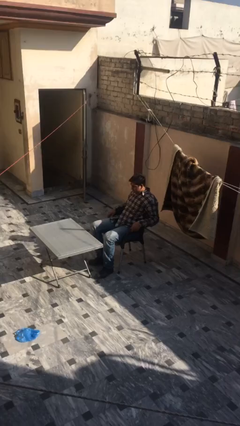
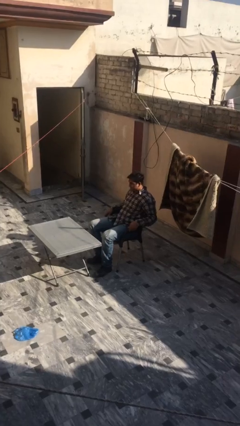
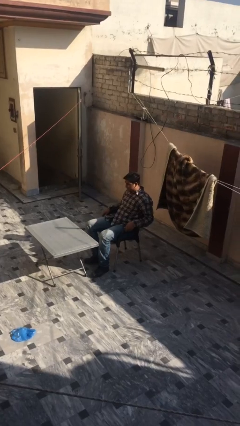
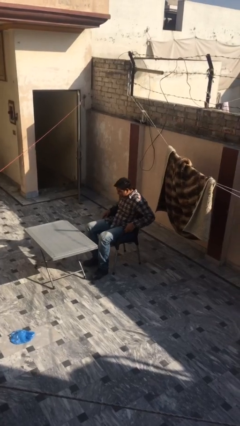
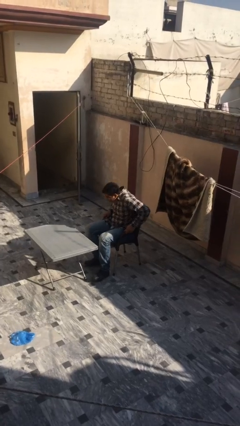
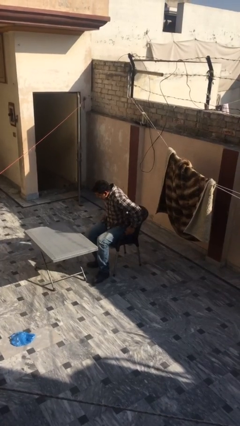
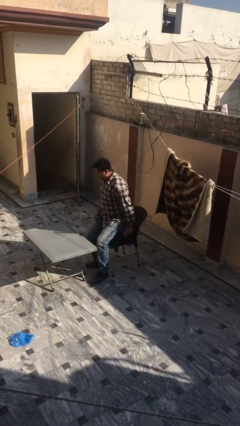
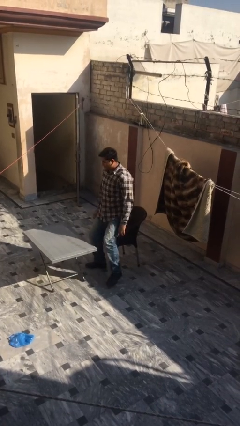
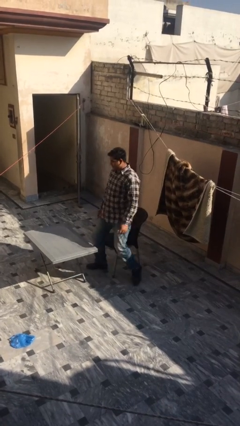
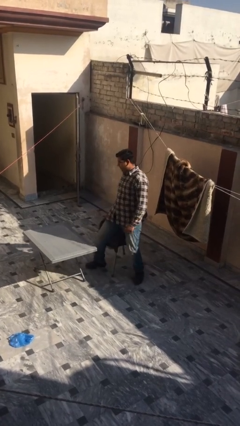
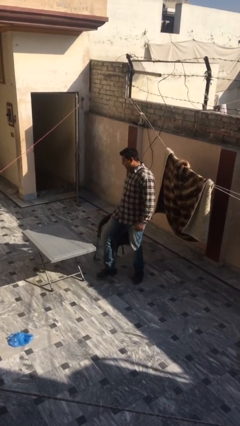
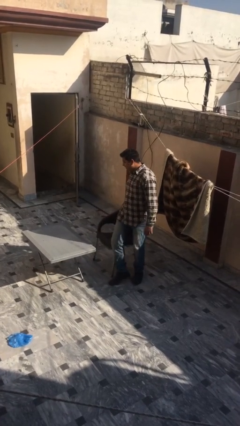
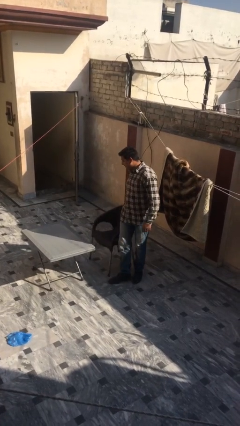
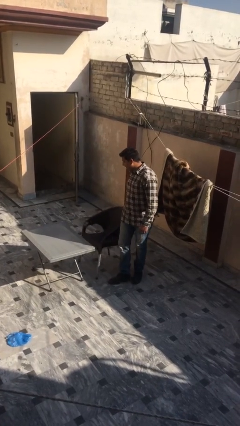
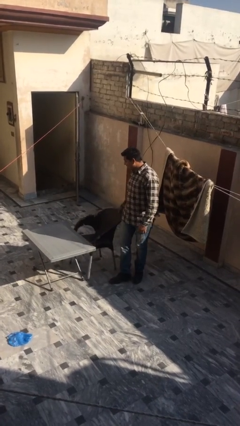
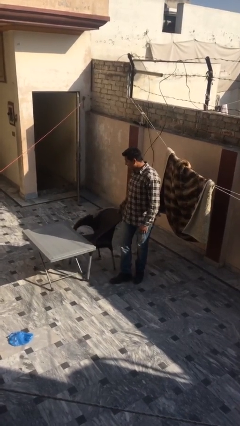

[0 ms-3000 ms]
person stands up

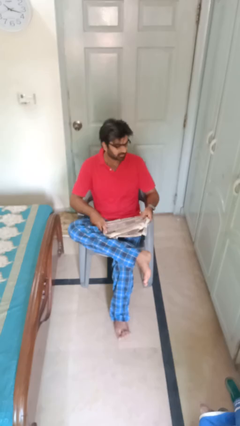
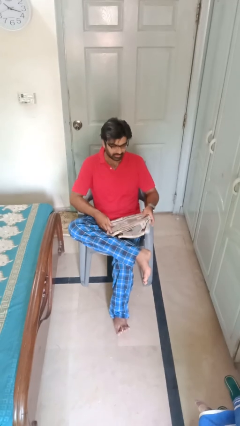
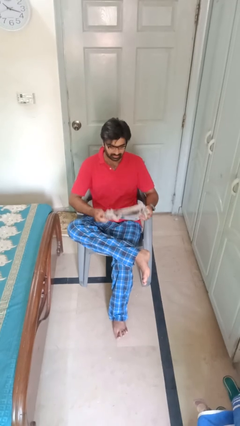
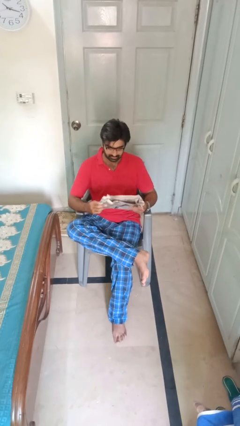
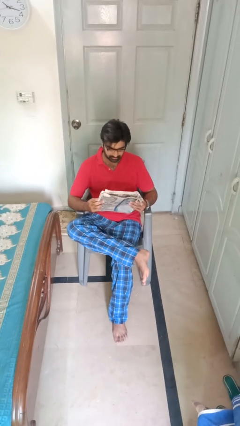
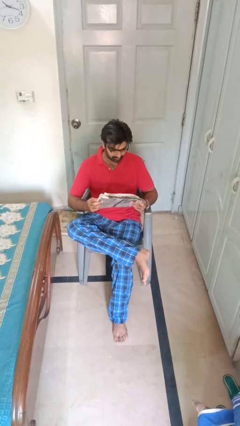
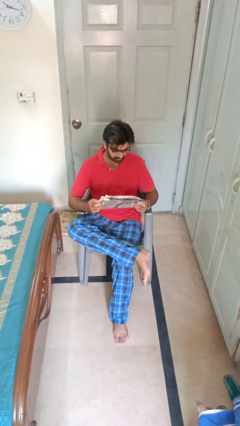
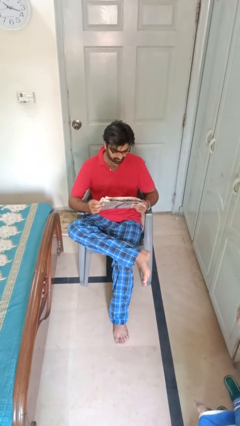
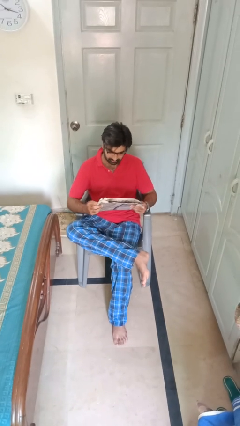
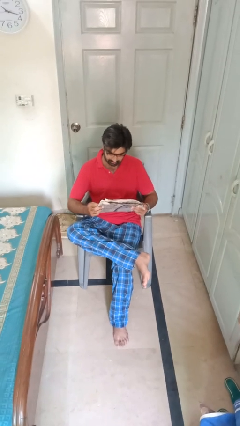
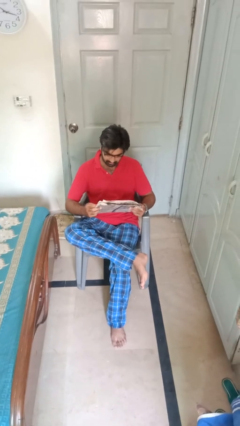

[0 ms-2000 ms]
person reads newspaper

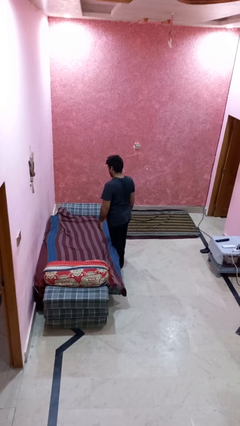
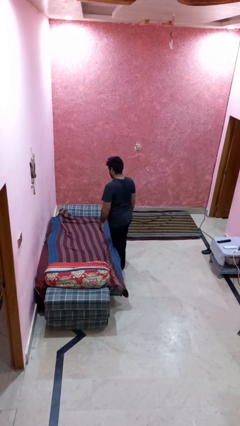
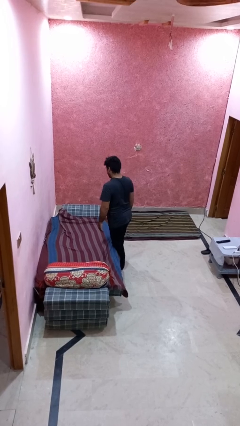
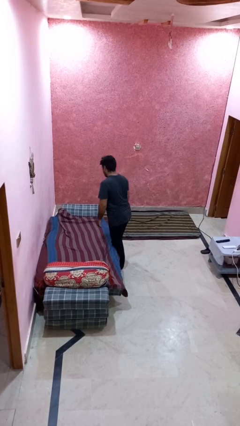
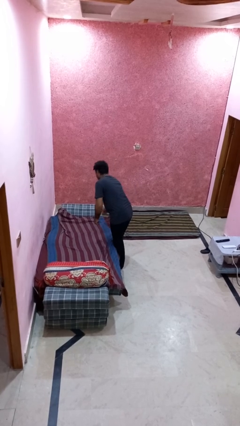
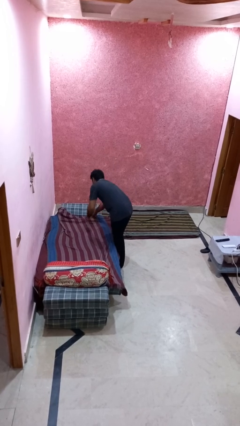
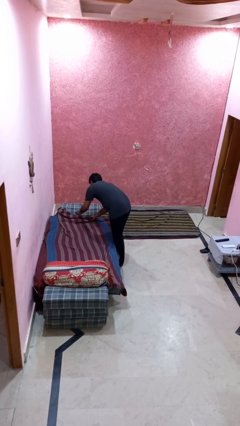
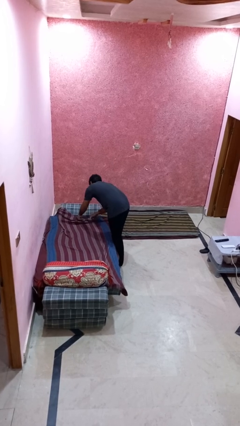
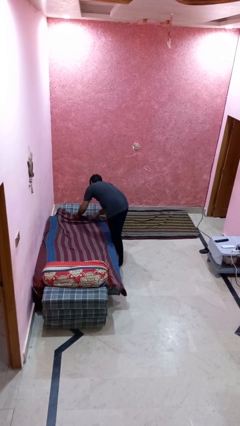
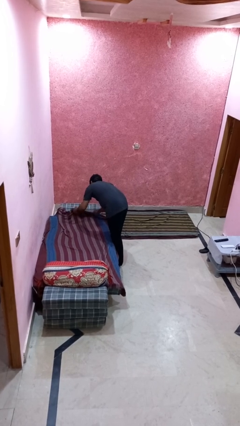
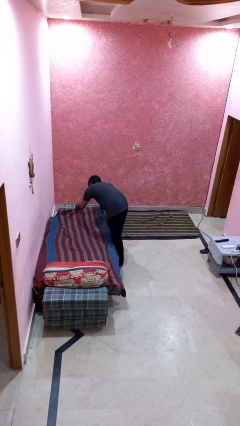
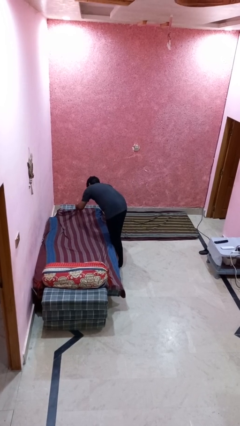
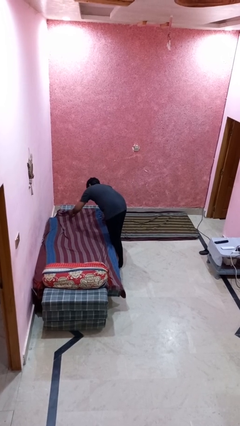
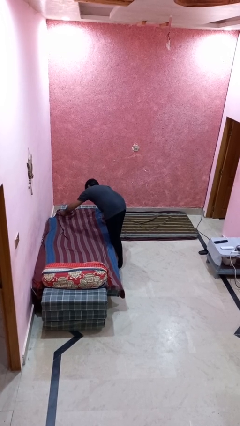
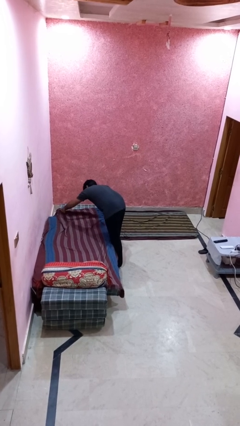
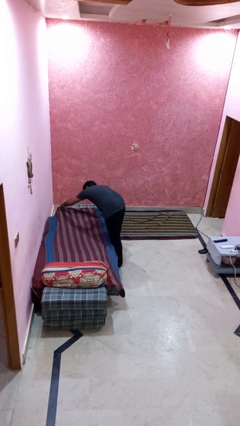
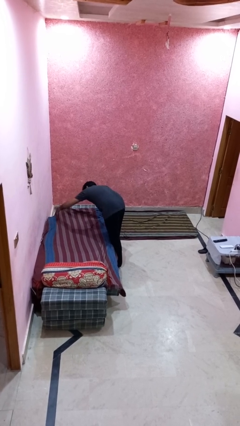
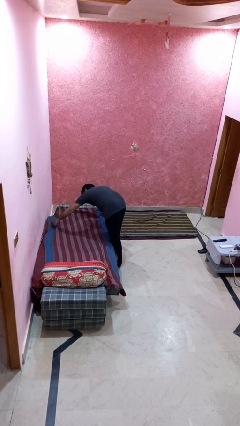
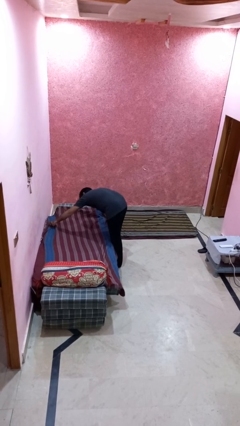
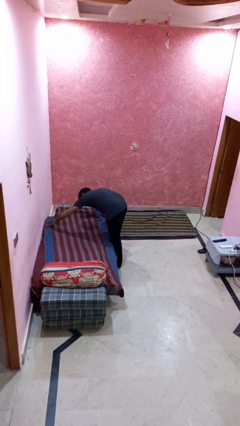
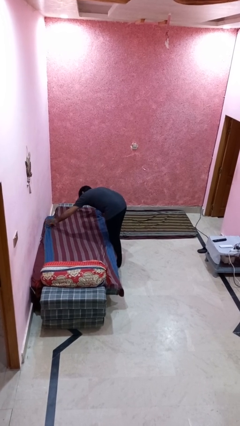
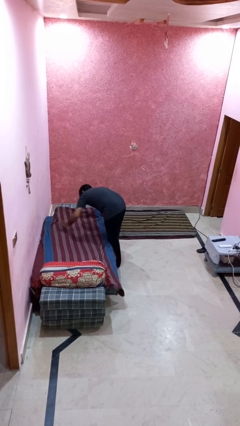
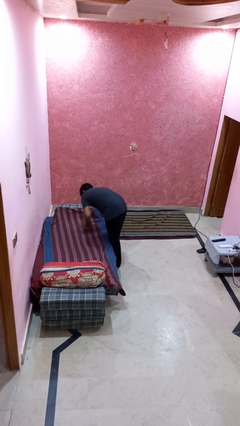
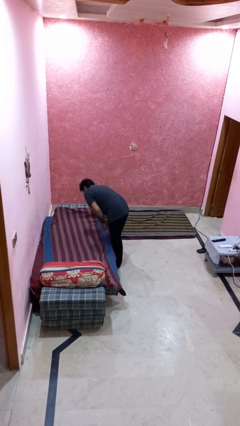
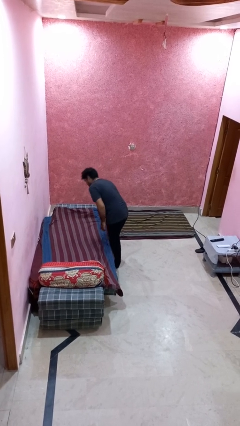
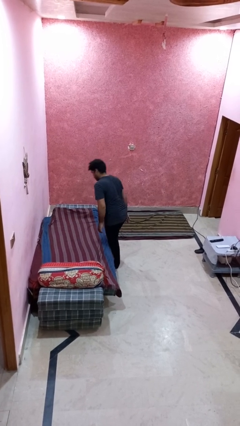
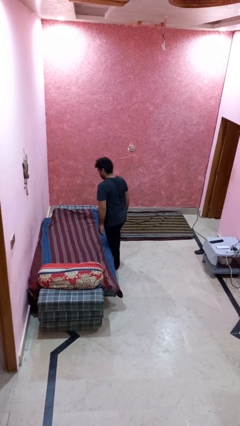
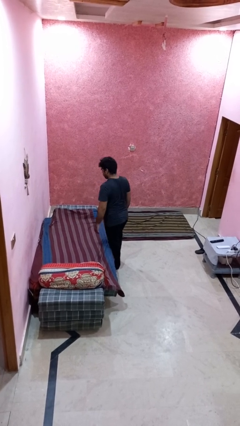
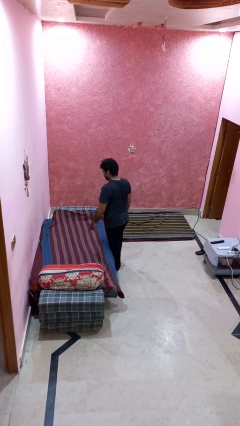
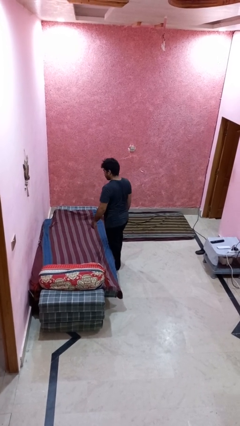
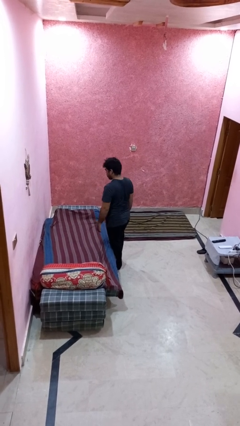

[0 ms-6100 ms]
person makes bed

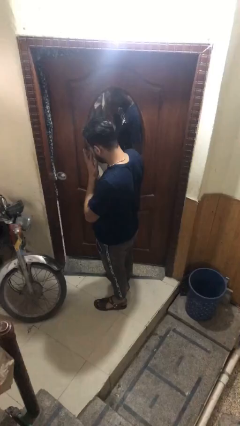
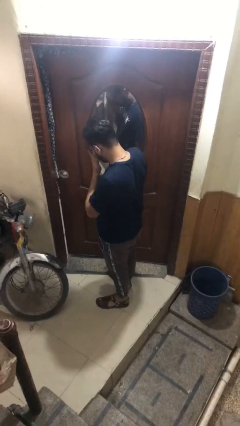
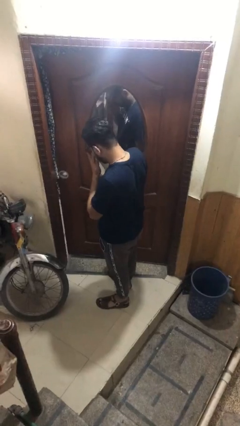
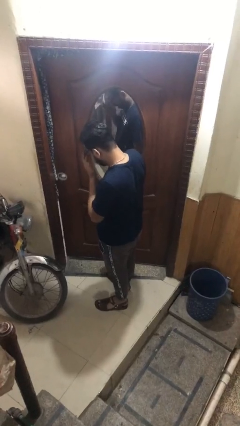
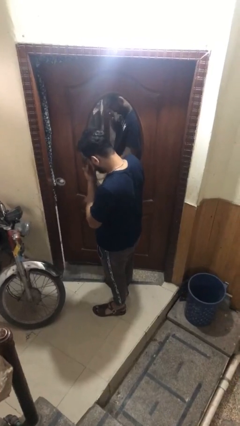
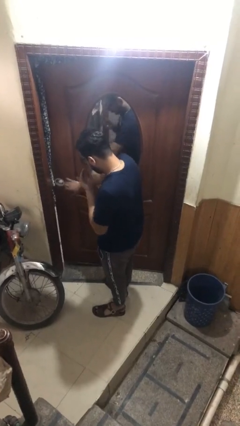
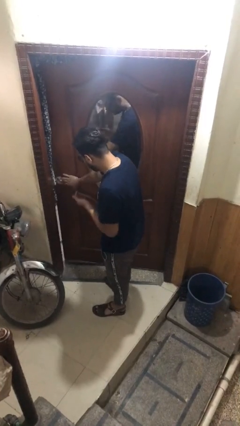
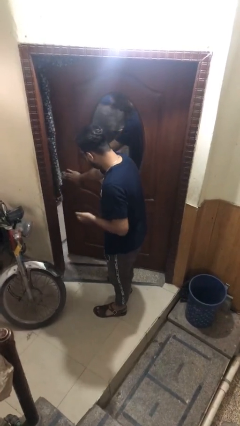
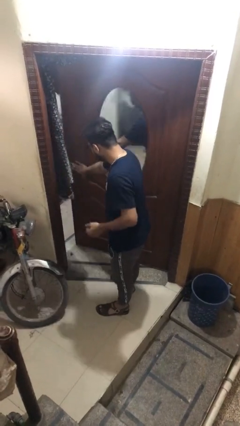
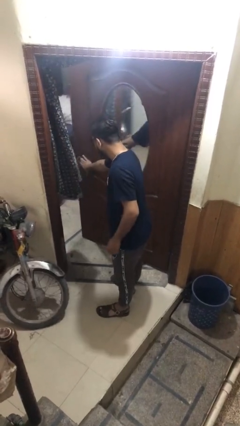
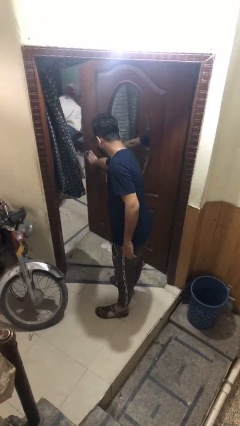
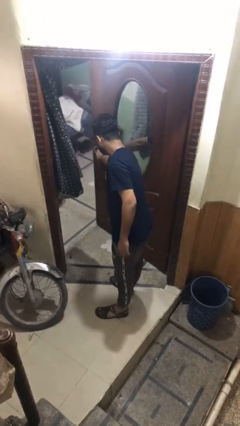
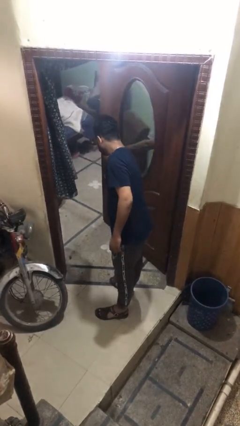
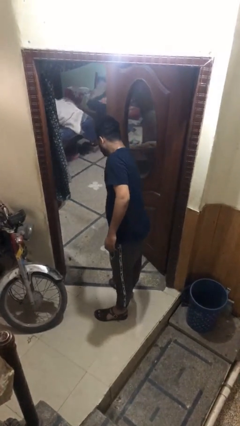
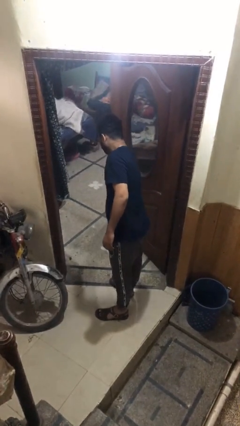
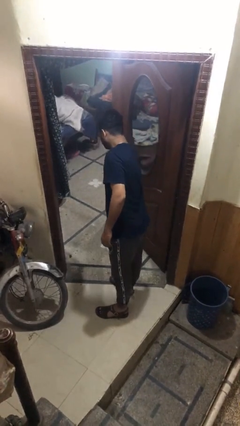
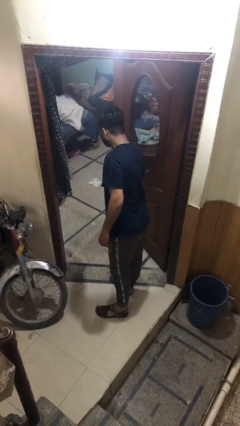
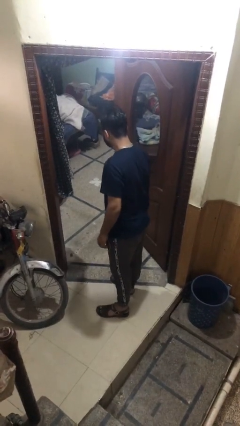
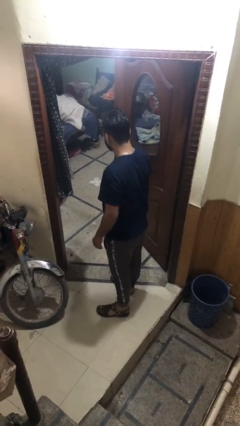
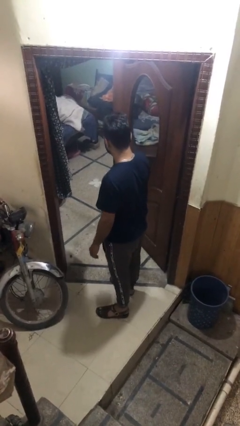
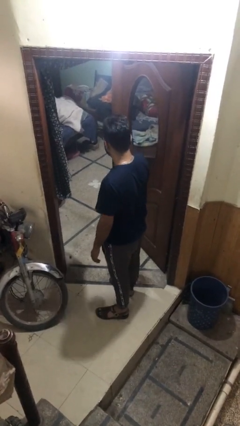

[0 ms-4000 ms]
person opens facility door

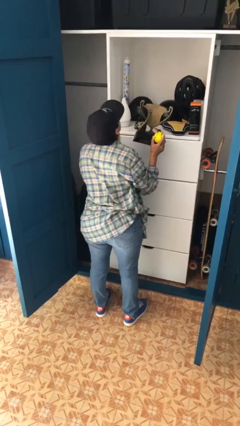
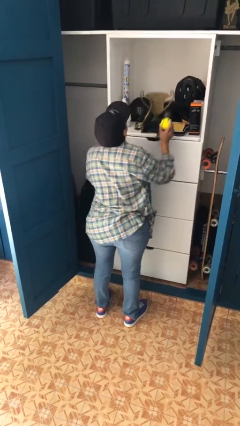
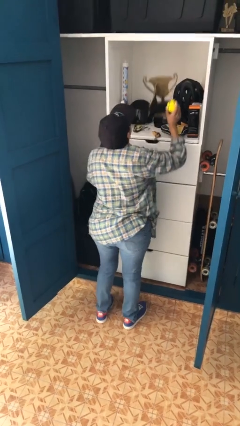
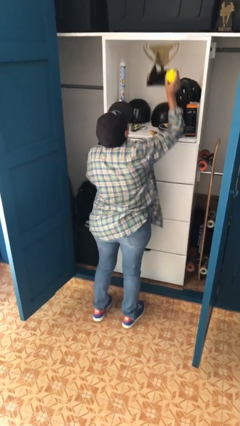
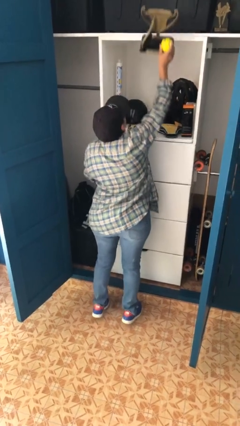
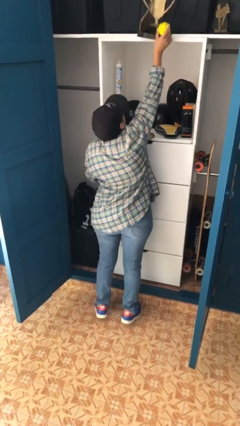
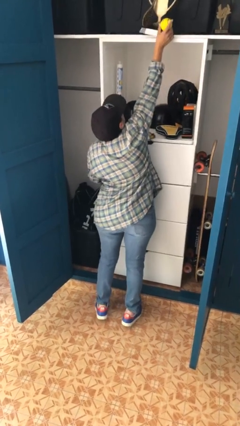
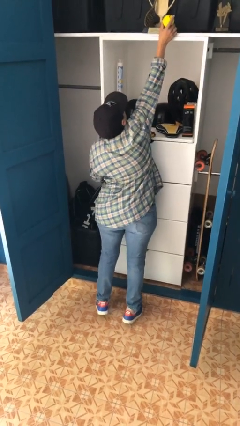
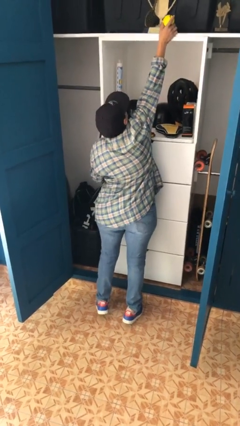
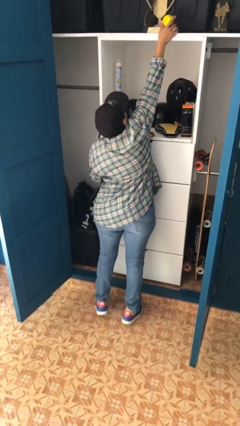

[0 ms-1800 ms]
person puts down object on shelf

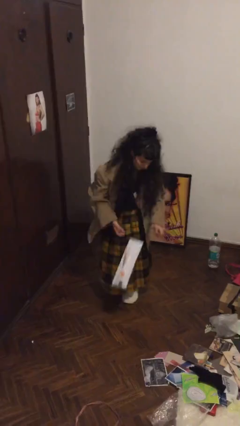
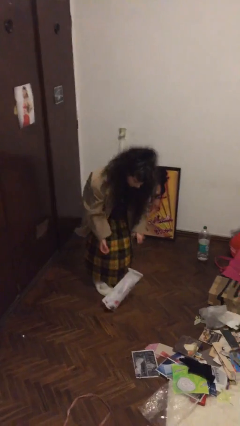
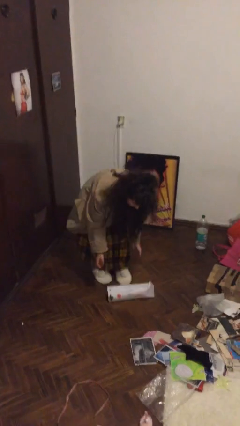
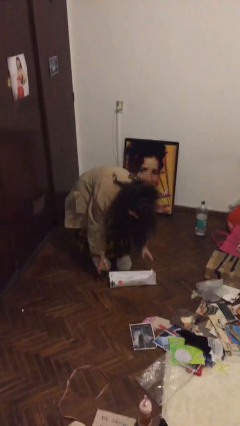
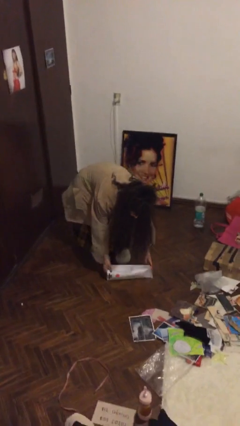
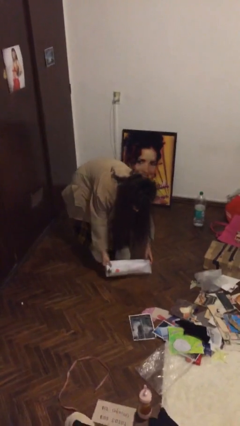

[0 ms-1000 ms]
person drops object
